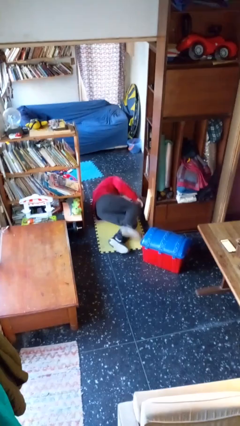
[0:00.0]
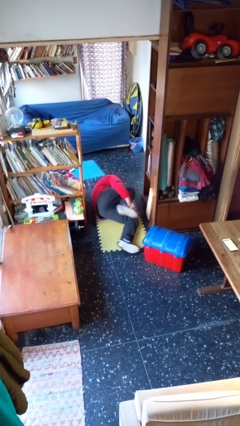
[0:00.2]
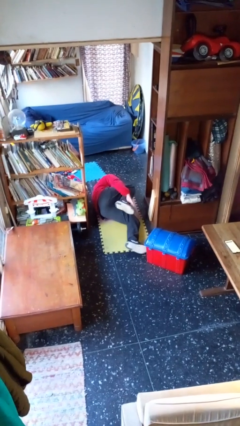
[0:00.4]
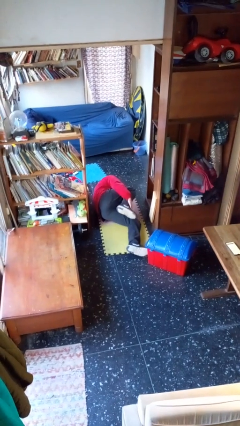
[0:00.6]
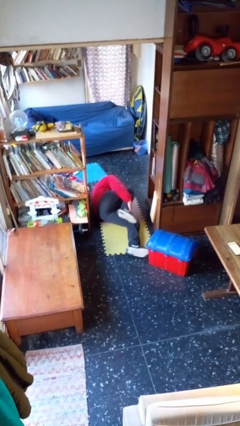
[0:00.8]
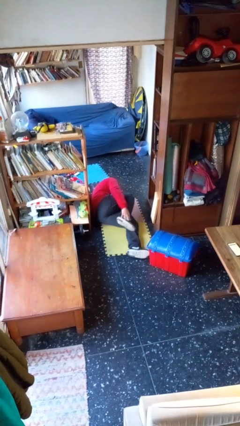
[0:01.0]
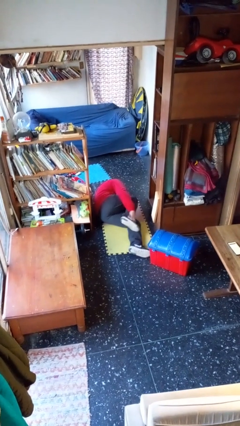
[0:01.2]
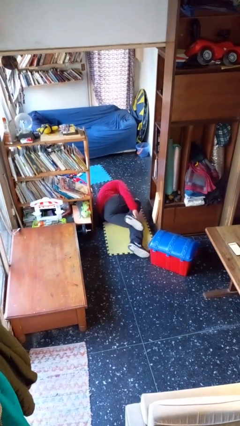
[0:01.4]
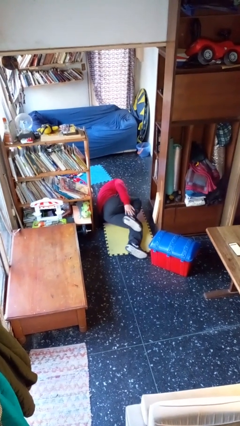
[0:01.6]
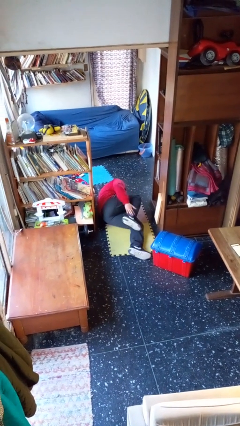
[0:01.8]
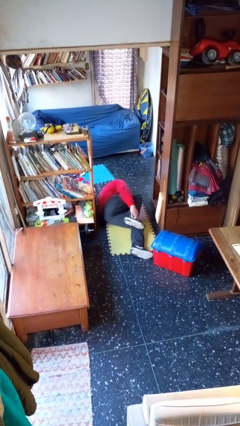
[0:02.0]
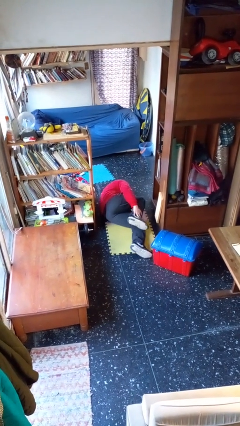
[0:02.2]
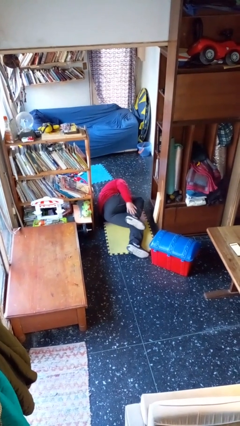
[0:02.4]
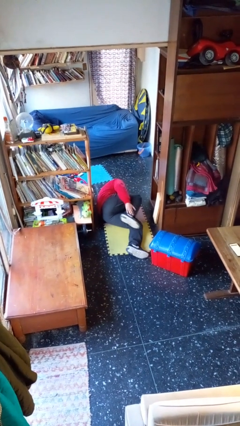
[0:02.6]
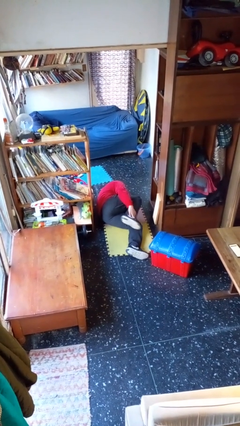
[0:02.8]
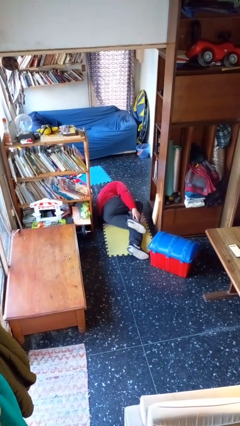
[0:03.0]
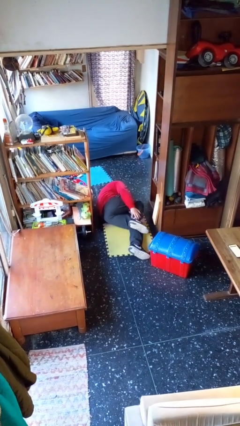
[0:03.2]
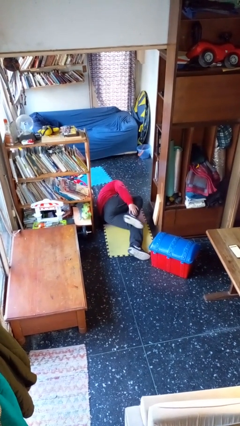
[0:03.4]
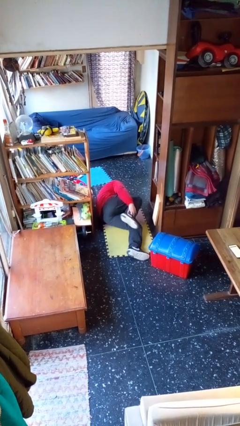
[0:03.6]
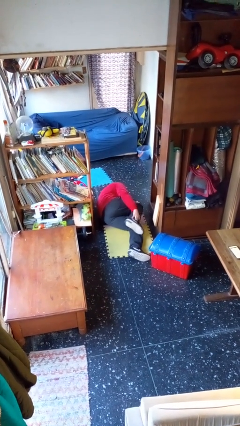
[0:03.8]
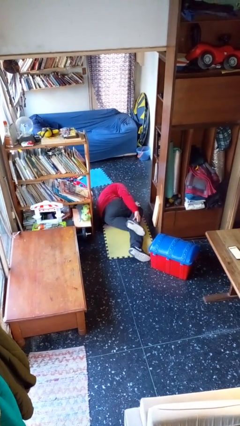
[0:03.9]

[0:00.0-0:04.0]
person lies down on floor

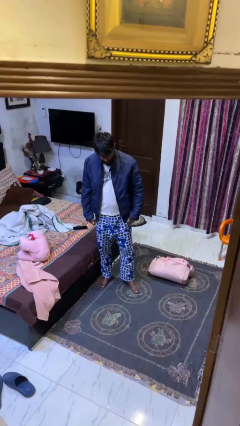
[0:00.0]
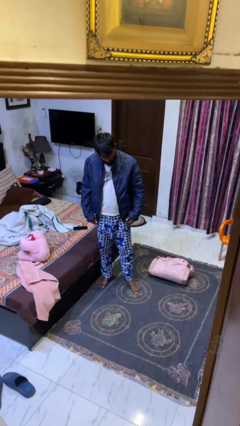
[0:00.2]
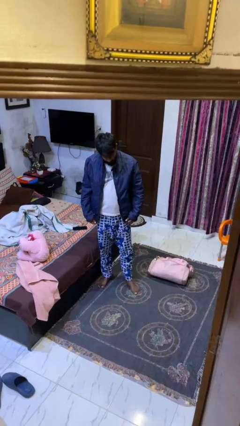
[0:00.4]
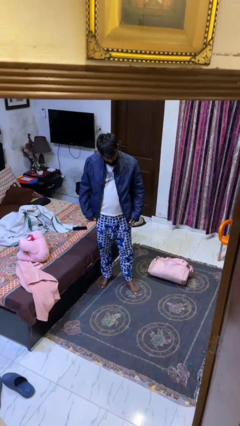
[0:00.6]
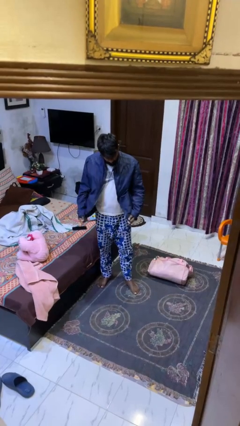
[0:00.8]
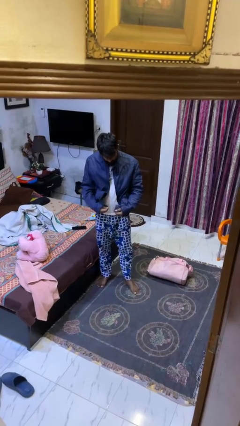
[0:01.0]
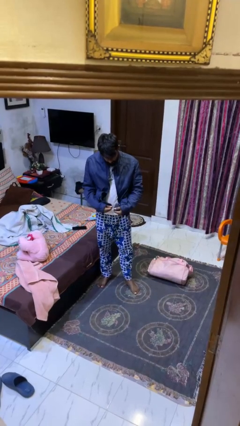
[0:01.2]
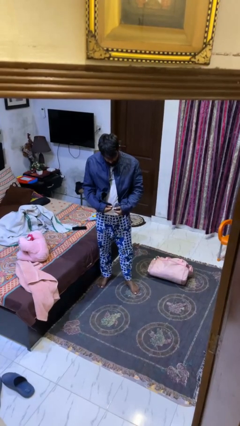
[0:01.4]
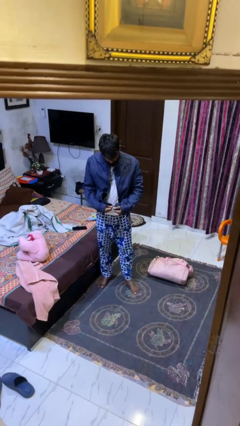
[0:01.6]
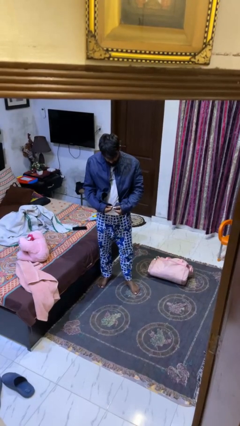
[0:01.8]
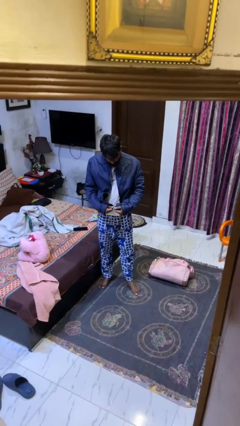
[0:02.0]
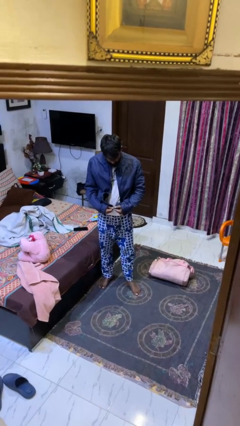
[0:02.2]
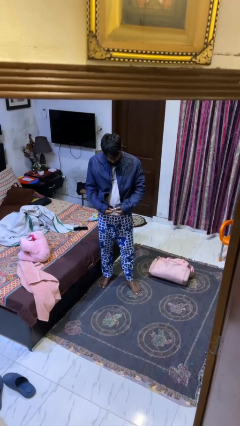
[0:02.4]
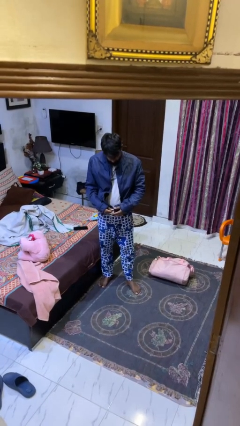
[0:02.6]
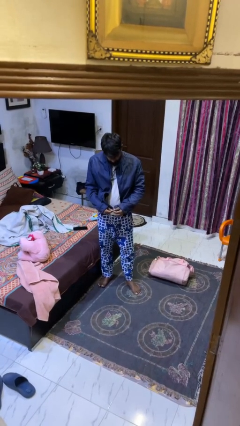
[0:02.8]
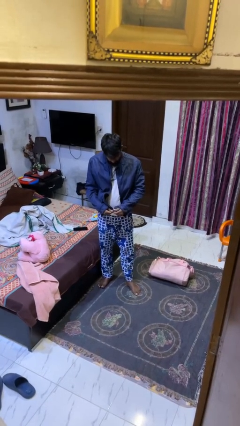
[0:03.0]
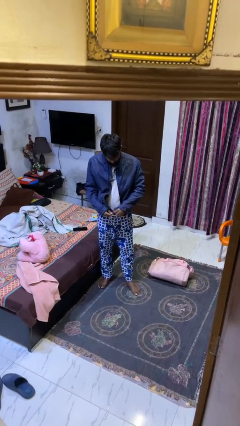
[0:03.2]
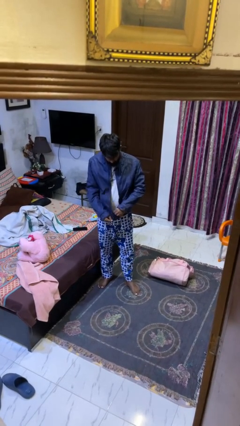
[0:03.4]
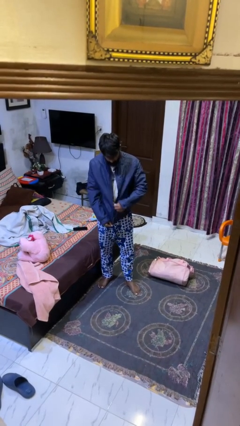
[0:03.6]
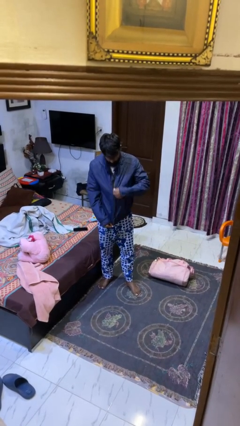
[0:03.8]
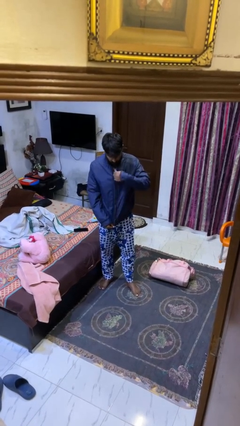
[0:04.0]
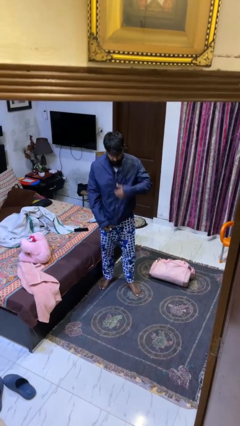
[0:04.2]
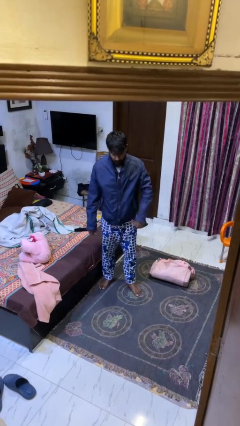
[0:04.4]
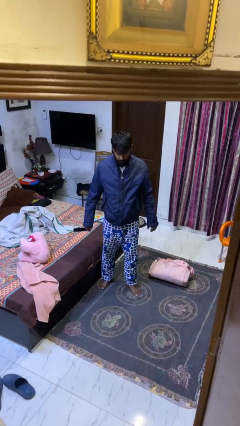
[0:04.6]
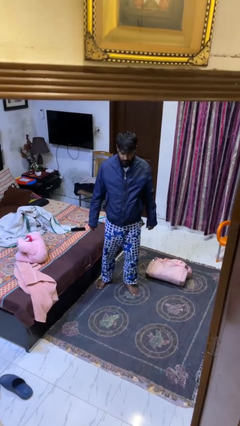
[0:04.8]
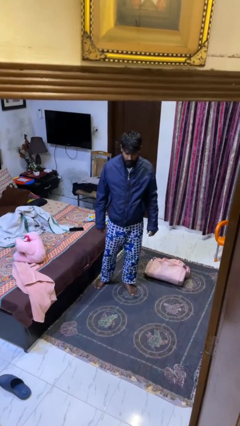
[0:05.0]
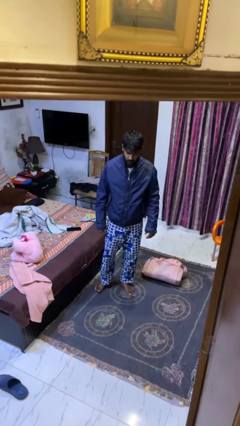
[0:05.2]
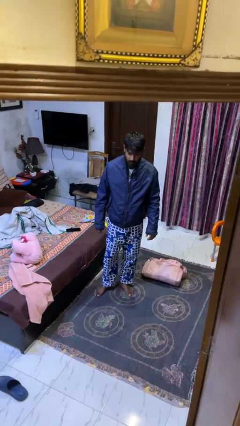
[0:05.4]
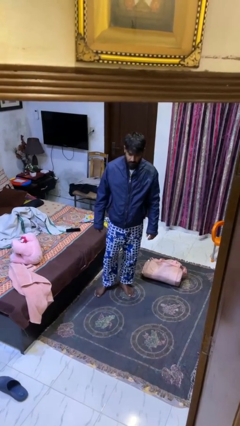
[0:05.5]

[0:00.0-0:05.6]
person zips up jacket

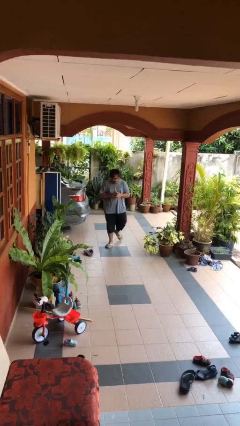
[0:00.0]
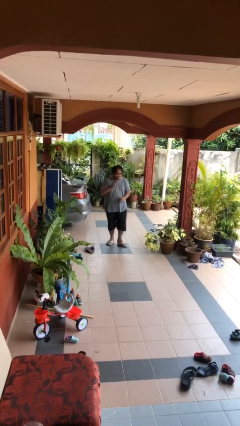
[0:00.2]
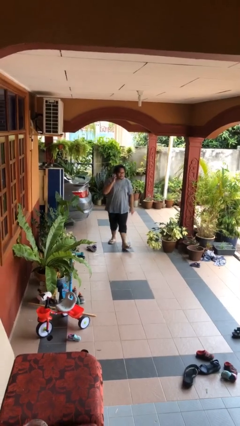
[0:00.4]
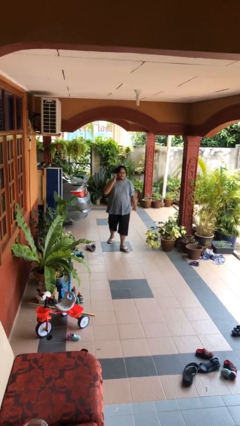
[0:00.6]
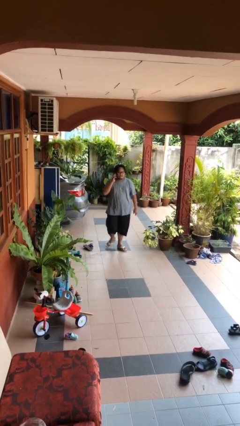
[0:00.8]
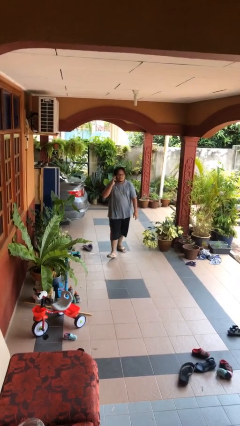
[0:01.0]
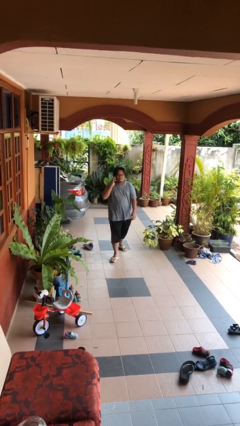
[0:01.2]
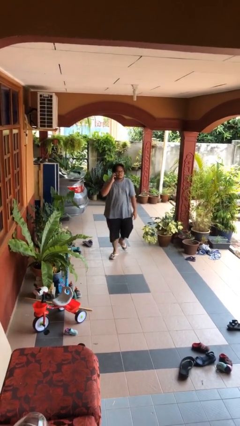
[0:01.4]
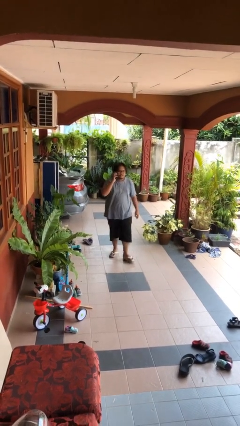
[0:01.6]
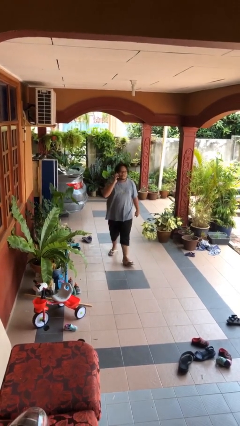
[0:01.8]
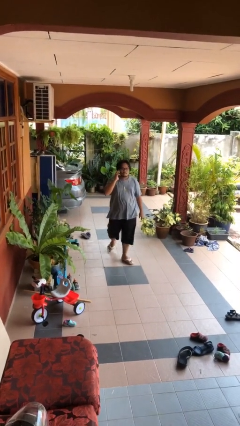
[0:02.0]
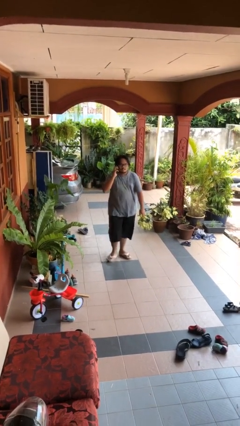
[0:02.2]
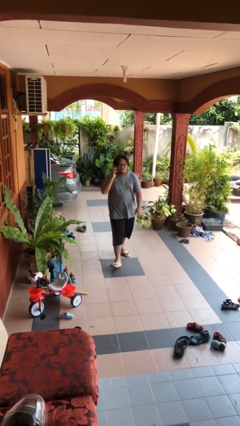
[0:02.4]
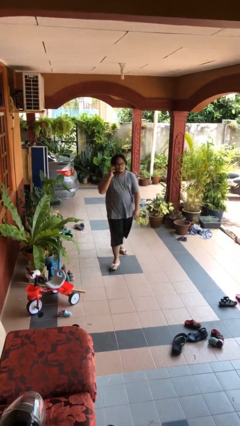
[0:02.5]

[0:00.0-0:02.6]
person talks on phone

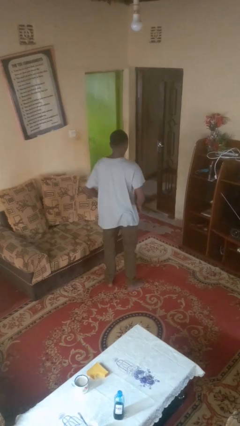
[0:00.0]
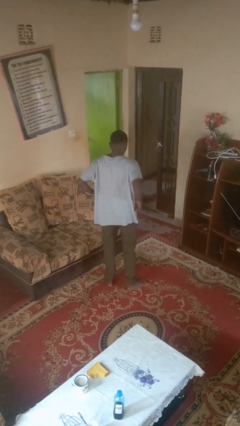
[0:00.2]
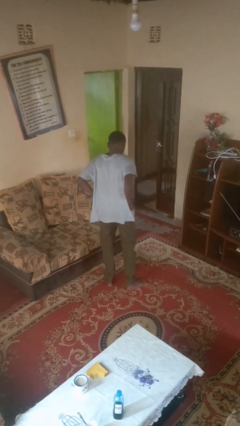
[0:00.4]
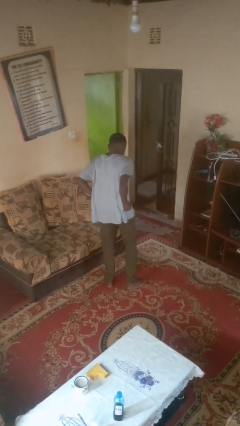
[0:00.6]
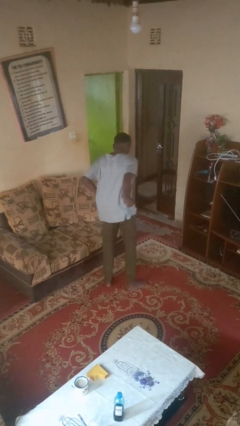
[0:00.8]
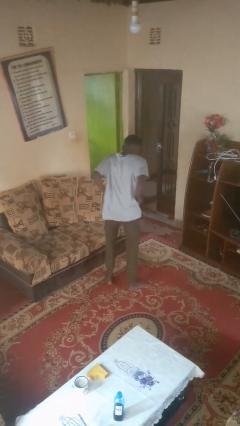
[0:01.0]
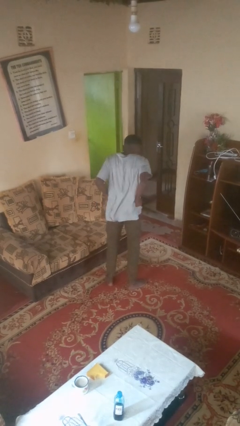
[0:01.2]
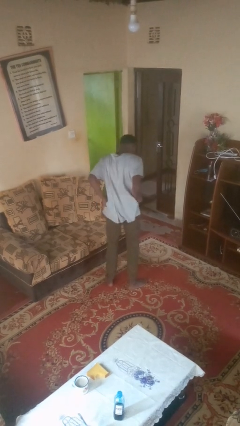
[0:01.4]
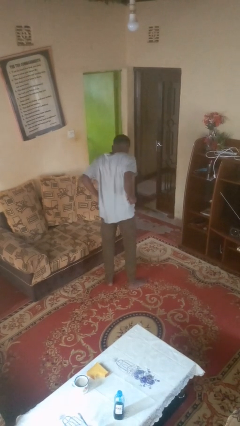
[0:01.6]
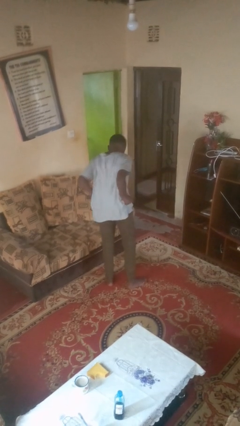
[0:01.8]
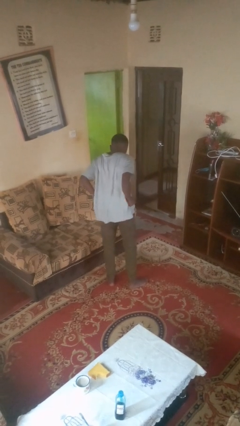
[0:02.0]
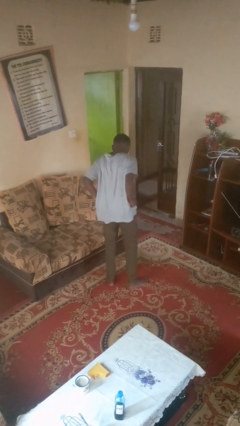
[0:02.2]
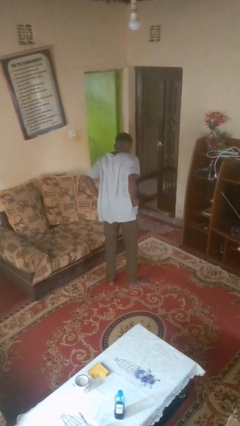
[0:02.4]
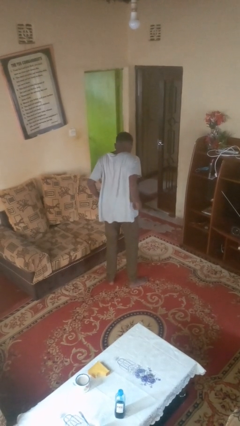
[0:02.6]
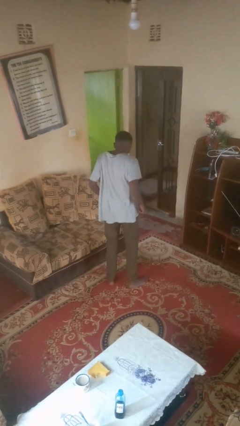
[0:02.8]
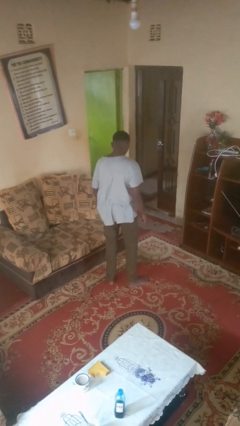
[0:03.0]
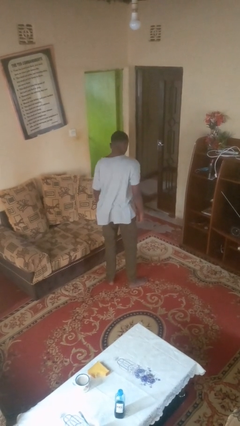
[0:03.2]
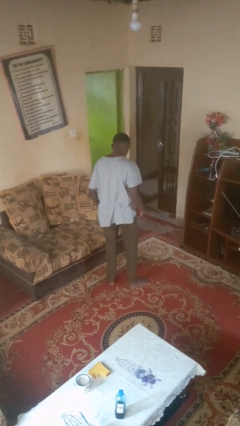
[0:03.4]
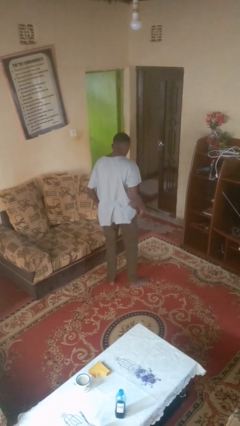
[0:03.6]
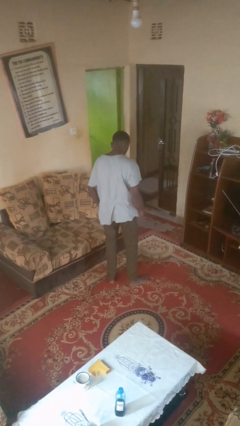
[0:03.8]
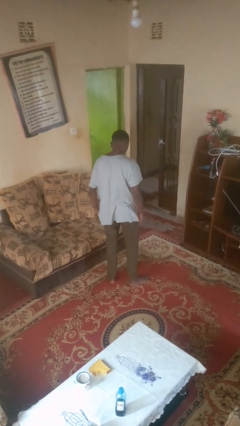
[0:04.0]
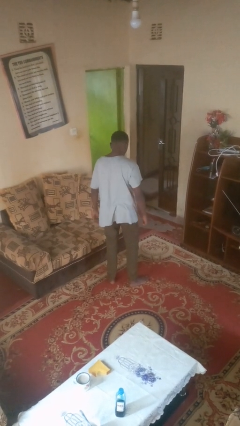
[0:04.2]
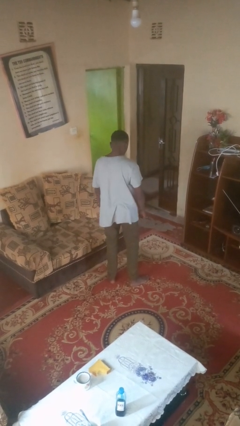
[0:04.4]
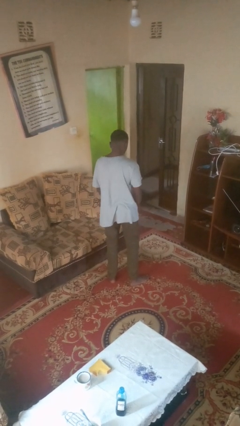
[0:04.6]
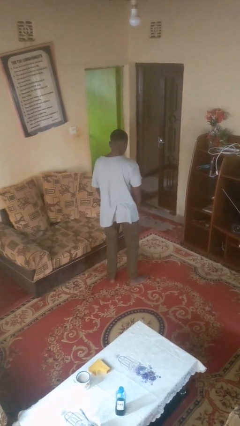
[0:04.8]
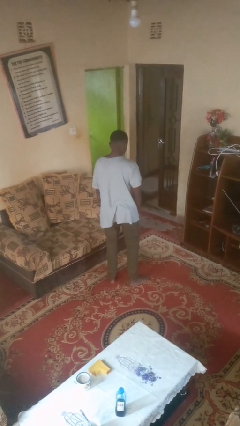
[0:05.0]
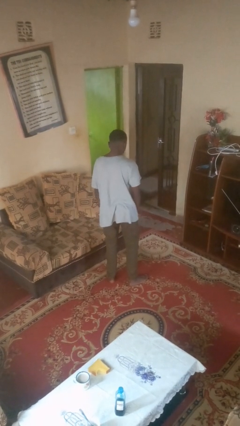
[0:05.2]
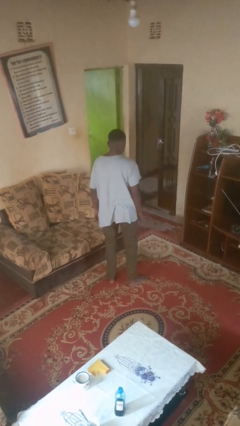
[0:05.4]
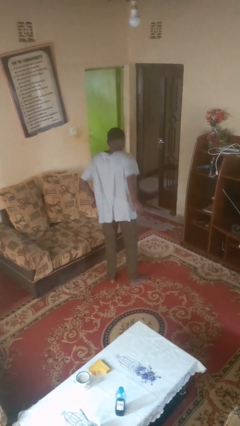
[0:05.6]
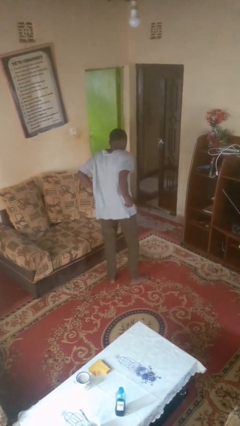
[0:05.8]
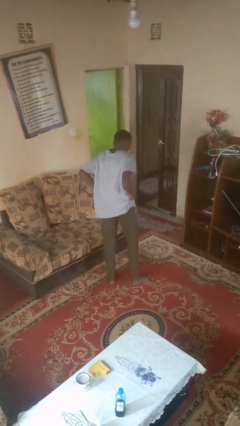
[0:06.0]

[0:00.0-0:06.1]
person washes dish
